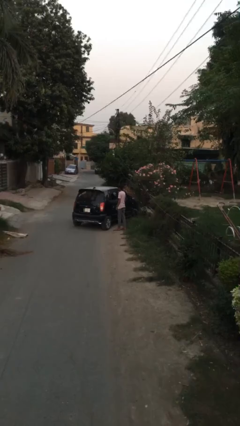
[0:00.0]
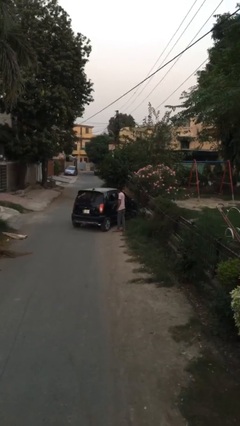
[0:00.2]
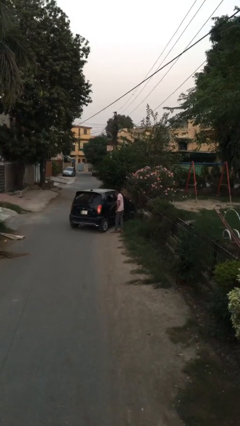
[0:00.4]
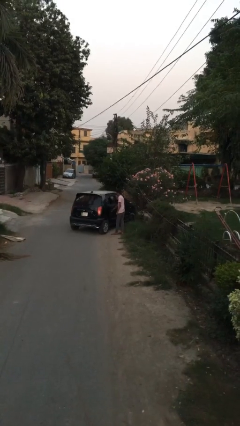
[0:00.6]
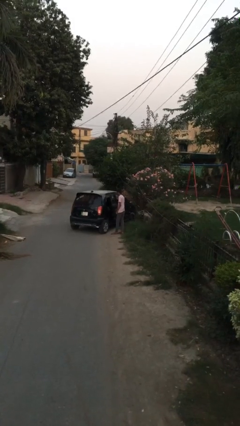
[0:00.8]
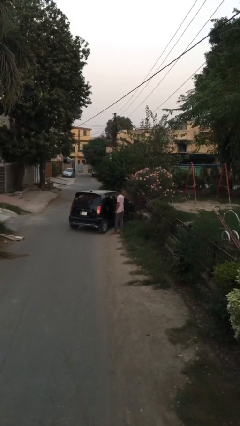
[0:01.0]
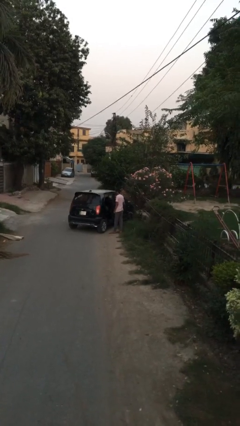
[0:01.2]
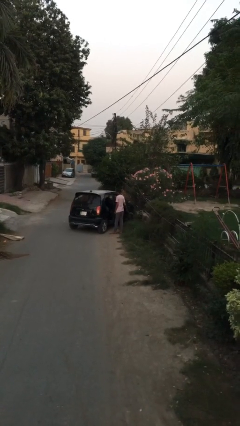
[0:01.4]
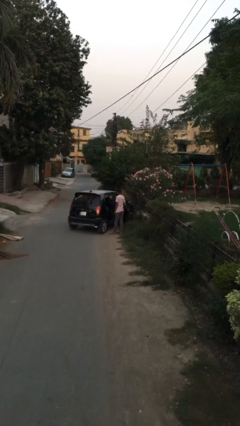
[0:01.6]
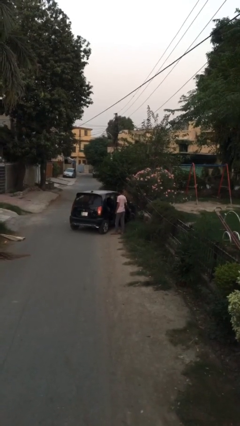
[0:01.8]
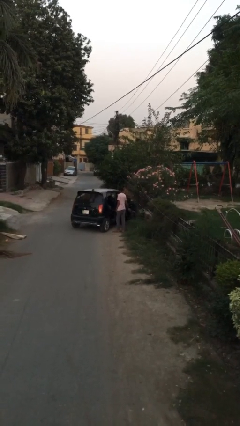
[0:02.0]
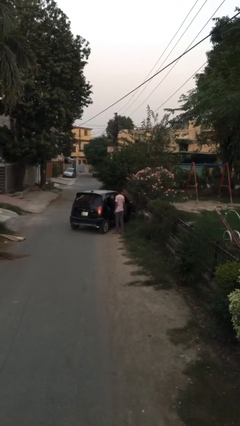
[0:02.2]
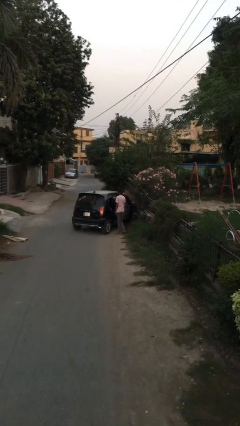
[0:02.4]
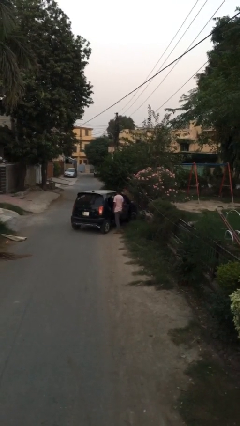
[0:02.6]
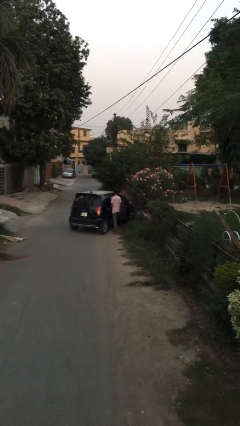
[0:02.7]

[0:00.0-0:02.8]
person opens car door

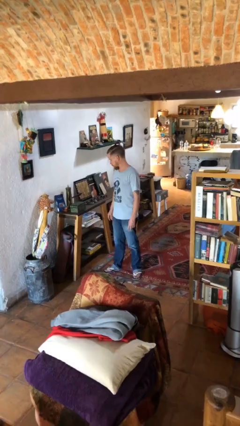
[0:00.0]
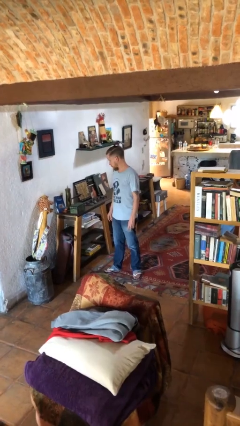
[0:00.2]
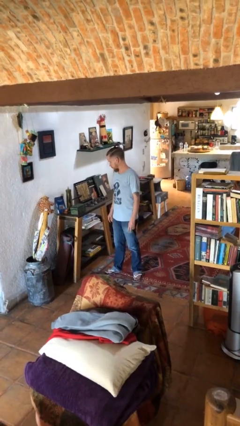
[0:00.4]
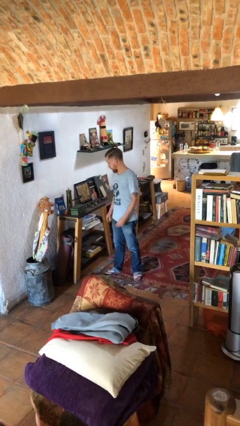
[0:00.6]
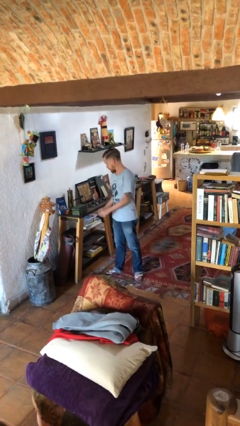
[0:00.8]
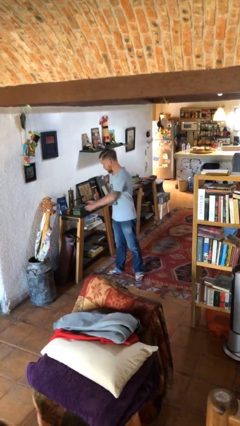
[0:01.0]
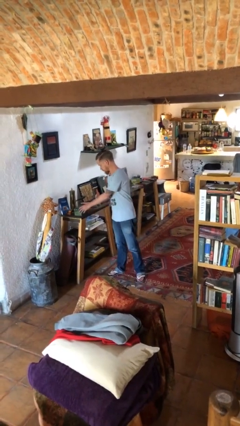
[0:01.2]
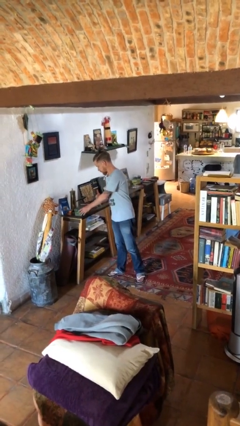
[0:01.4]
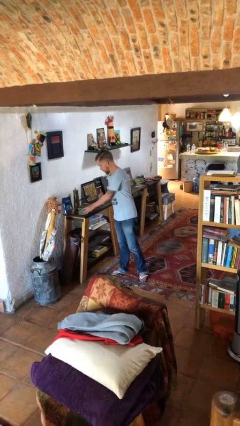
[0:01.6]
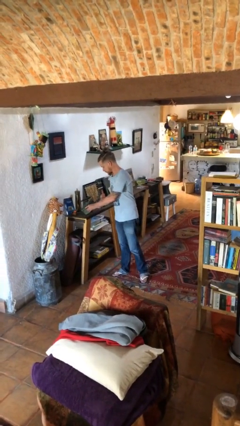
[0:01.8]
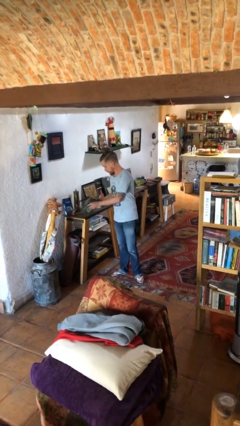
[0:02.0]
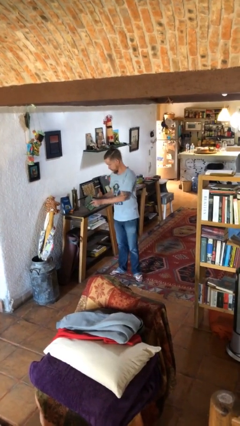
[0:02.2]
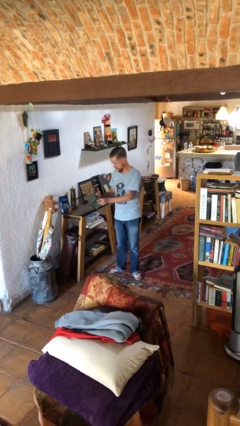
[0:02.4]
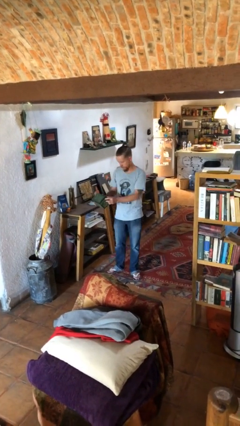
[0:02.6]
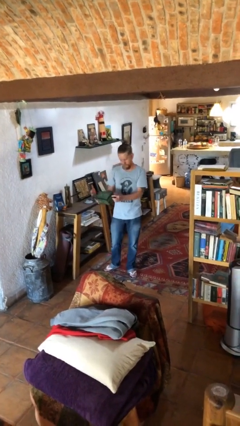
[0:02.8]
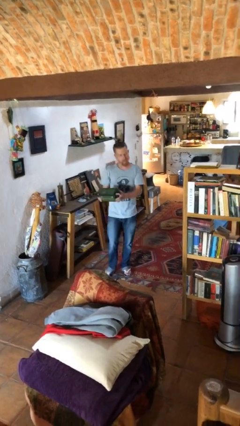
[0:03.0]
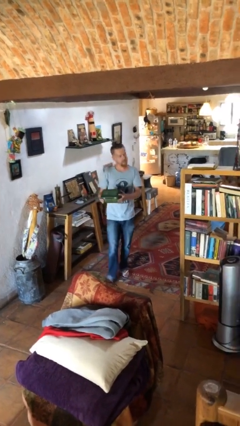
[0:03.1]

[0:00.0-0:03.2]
person picks up object from table

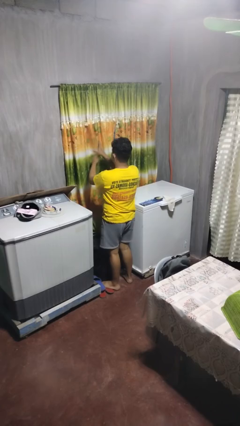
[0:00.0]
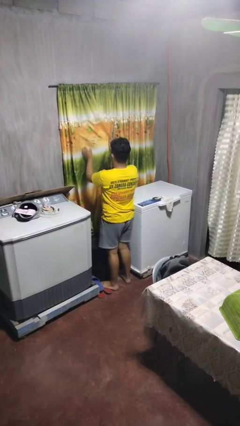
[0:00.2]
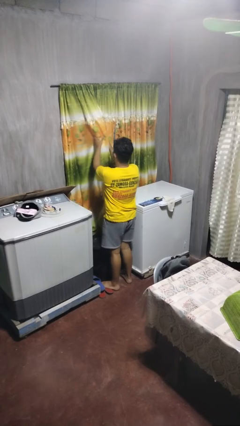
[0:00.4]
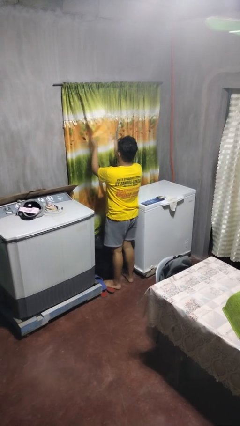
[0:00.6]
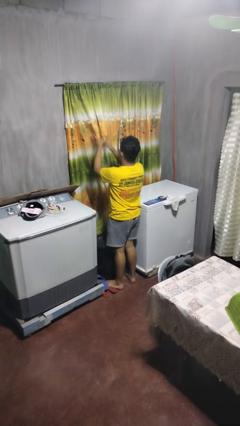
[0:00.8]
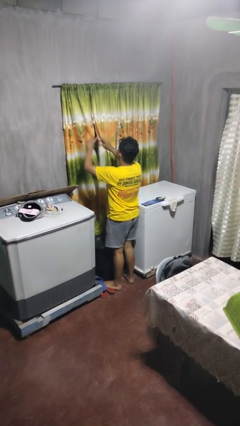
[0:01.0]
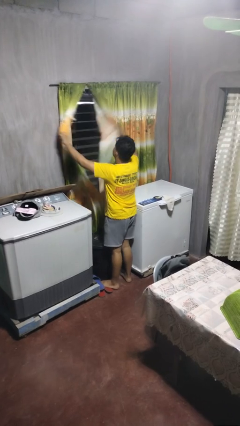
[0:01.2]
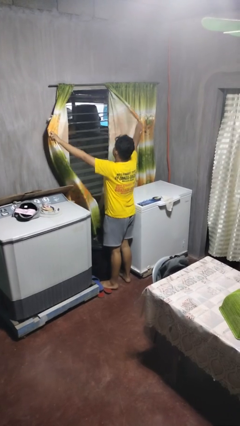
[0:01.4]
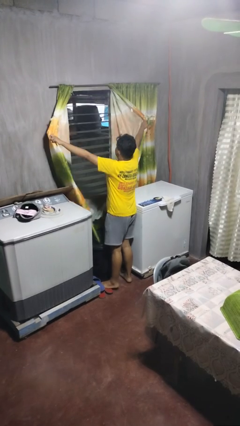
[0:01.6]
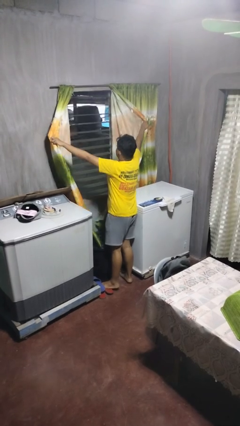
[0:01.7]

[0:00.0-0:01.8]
person opens curtains

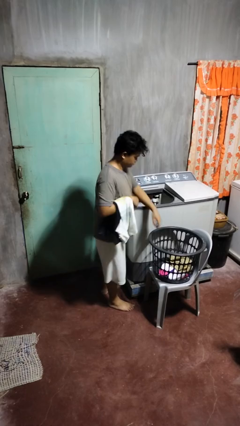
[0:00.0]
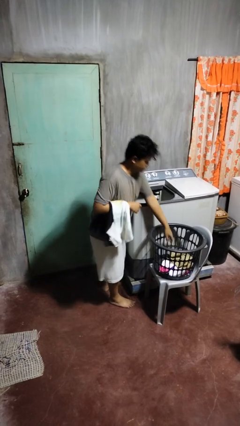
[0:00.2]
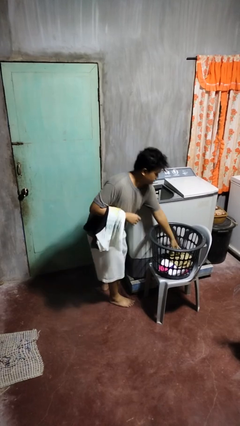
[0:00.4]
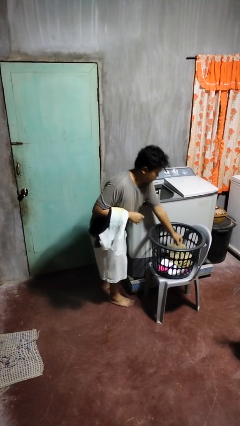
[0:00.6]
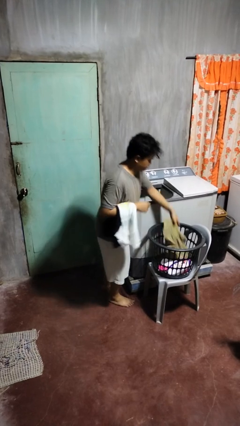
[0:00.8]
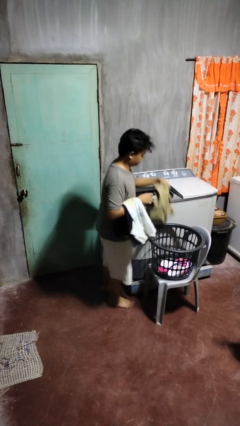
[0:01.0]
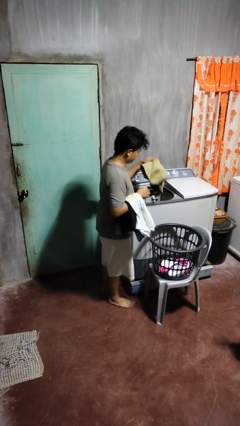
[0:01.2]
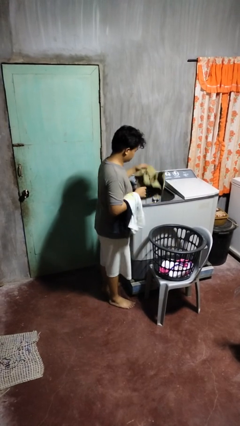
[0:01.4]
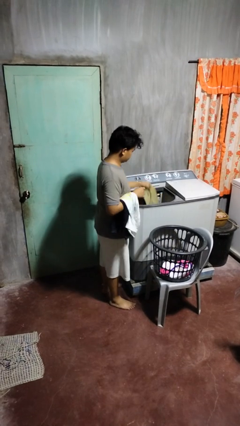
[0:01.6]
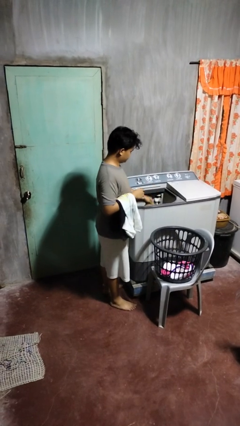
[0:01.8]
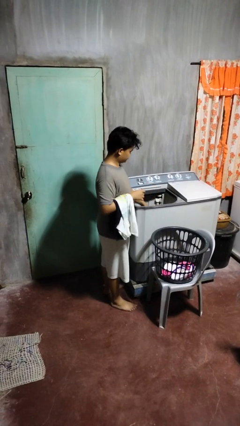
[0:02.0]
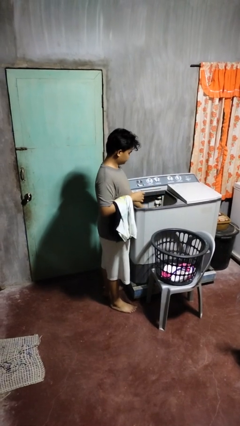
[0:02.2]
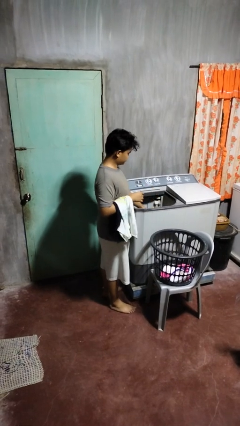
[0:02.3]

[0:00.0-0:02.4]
person loads clotheswasher

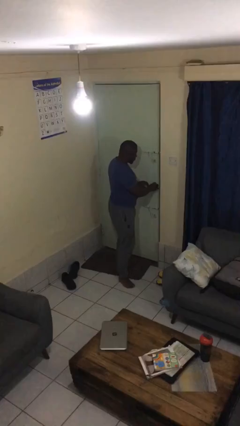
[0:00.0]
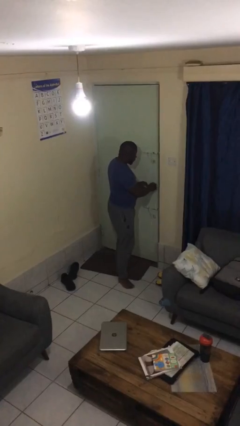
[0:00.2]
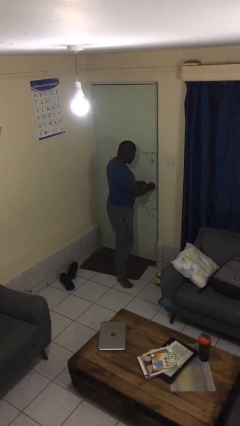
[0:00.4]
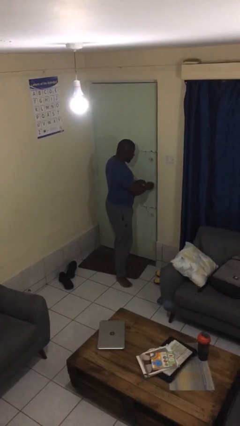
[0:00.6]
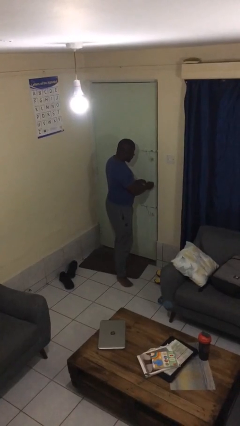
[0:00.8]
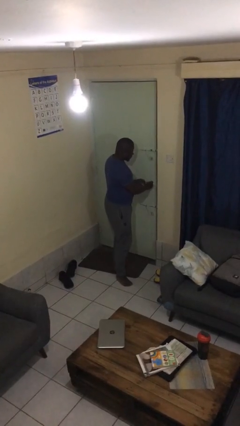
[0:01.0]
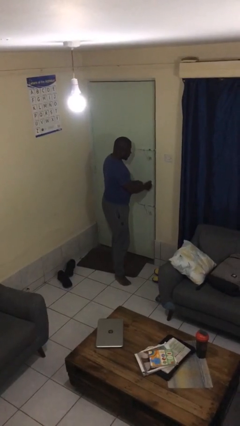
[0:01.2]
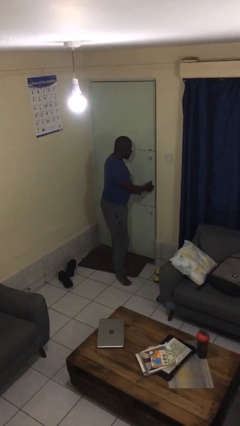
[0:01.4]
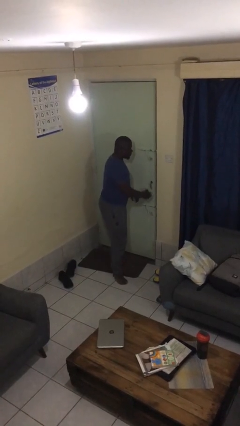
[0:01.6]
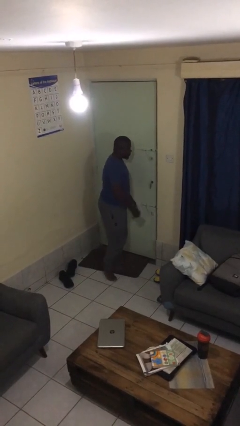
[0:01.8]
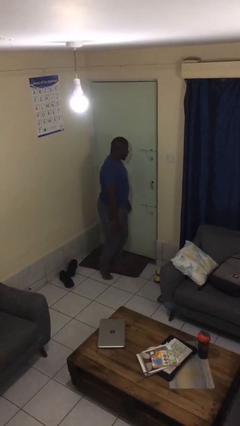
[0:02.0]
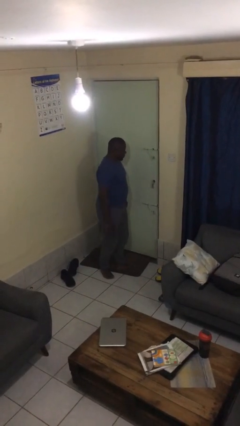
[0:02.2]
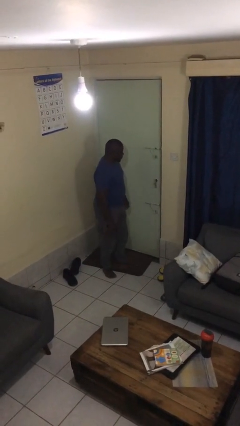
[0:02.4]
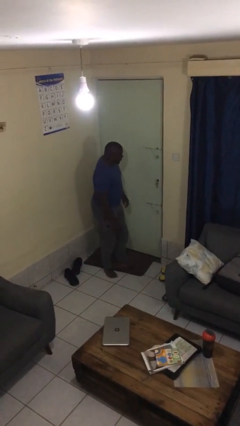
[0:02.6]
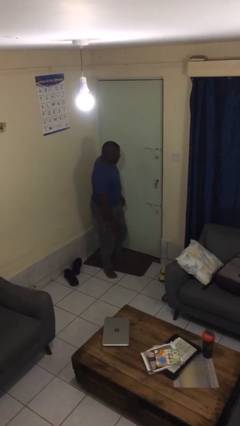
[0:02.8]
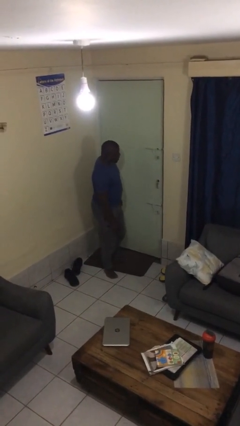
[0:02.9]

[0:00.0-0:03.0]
person locks door with keys

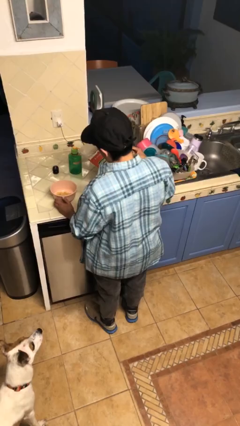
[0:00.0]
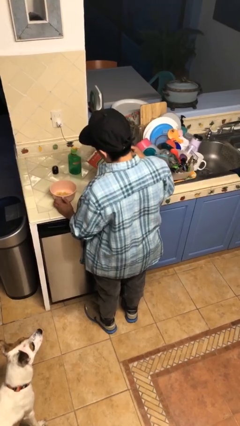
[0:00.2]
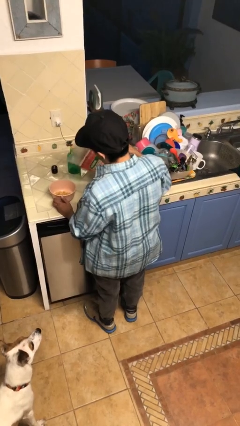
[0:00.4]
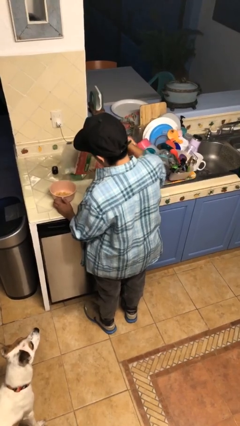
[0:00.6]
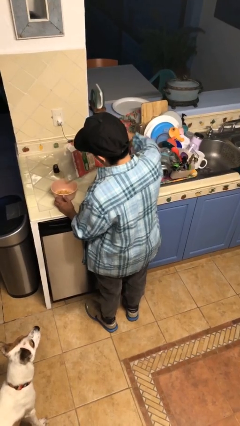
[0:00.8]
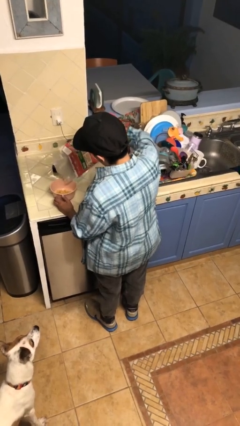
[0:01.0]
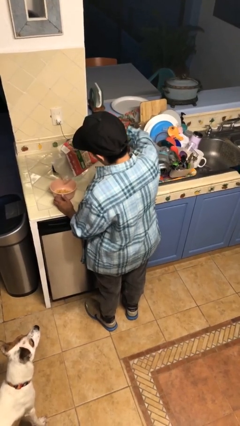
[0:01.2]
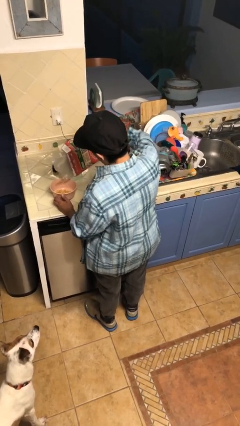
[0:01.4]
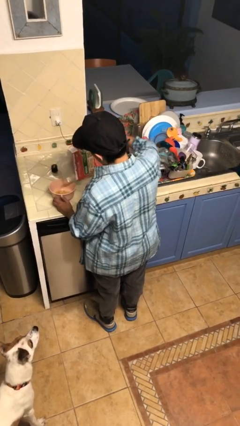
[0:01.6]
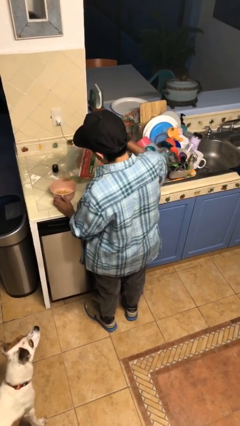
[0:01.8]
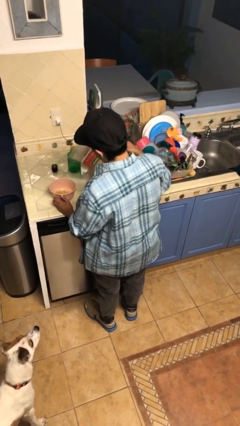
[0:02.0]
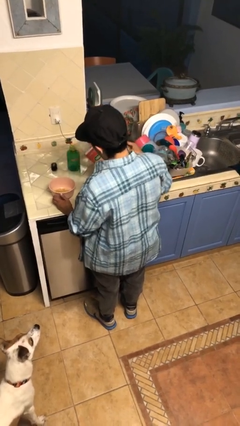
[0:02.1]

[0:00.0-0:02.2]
person pours into bowl

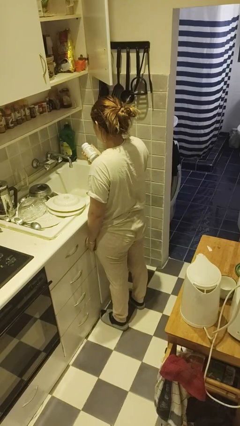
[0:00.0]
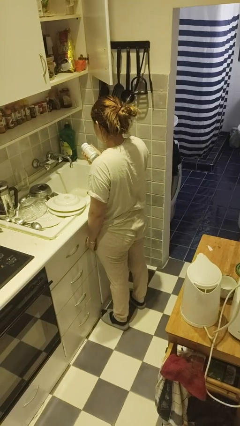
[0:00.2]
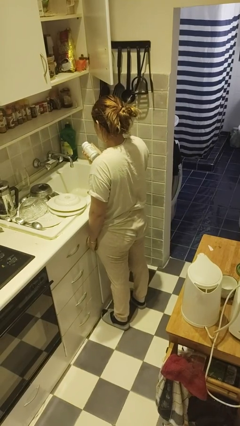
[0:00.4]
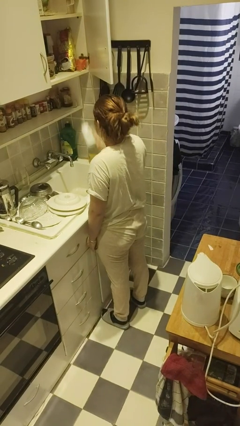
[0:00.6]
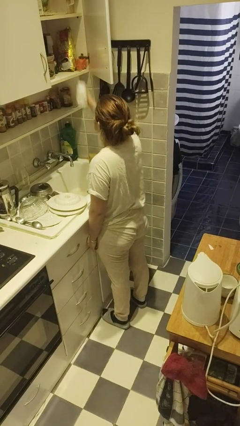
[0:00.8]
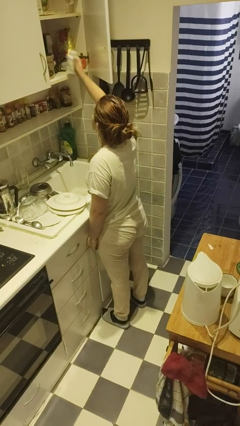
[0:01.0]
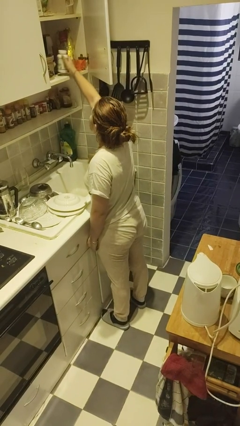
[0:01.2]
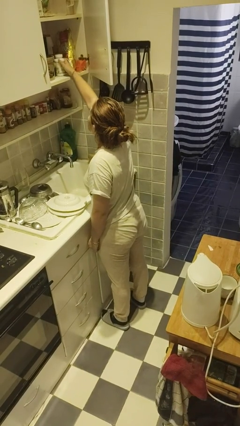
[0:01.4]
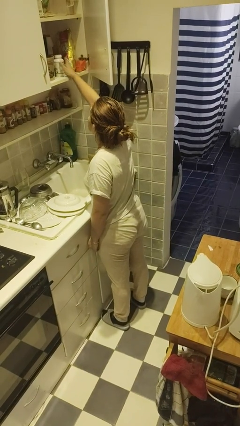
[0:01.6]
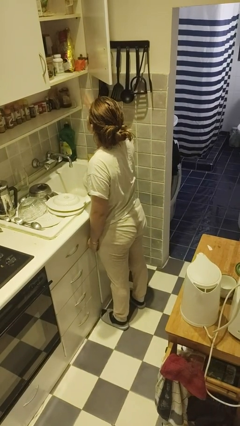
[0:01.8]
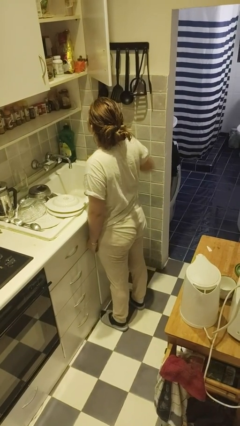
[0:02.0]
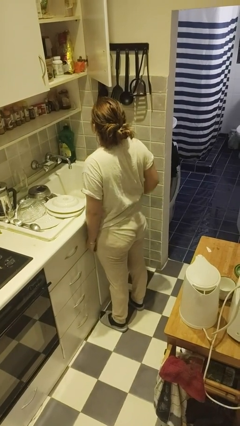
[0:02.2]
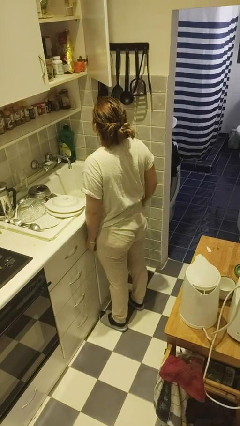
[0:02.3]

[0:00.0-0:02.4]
person puts down object into cabinet
